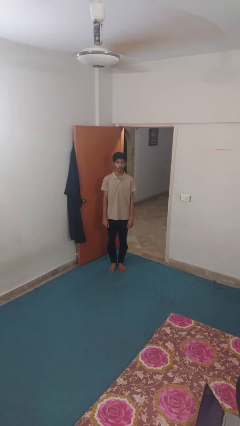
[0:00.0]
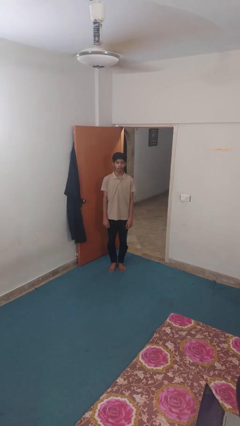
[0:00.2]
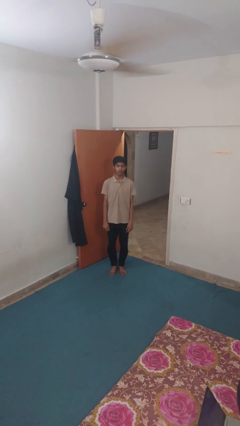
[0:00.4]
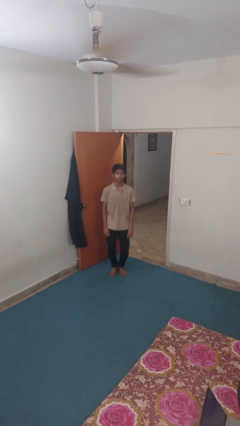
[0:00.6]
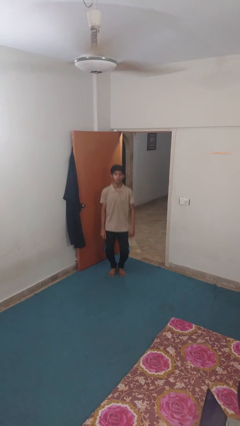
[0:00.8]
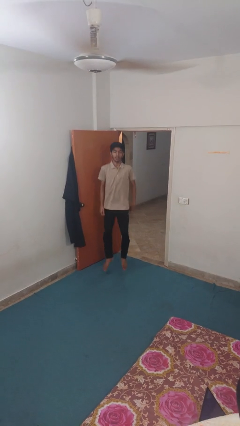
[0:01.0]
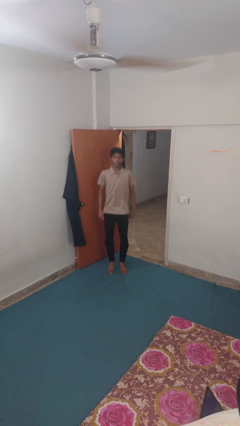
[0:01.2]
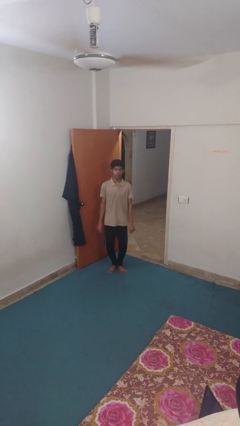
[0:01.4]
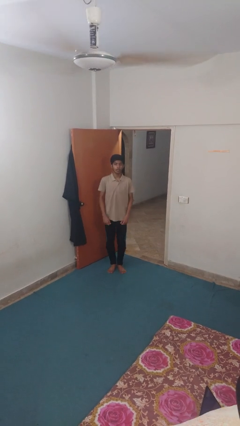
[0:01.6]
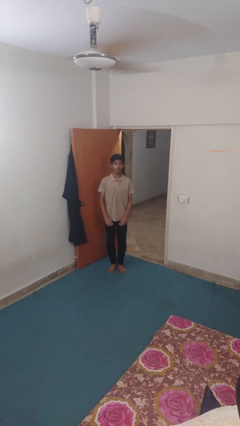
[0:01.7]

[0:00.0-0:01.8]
person jumps

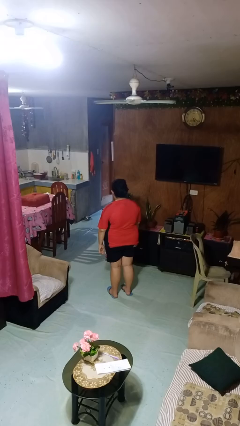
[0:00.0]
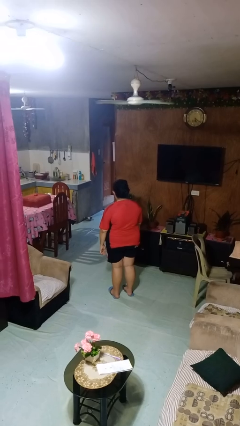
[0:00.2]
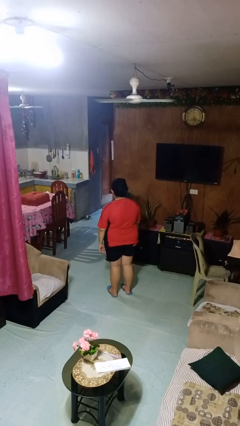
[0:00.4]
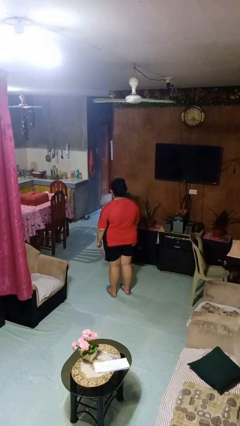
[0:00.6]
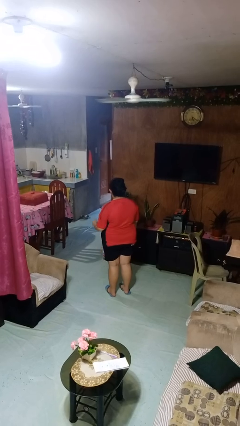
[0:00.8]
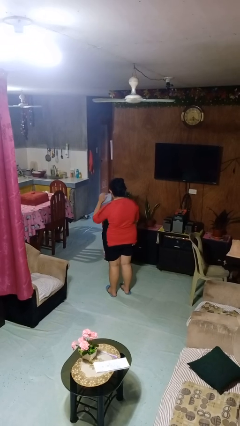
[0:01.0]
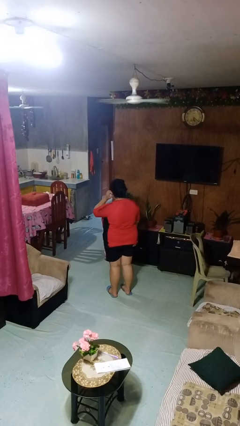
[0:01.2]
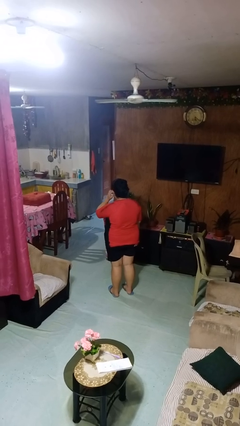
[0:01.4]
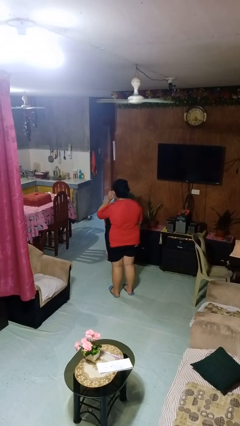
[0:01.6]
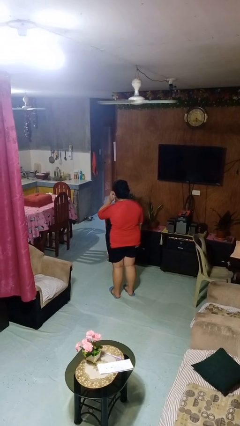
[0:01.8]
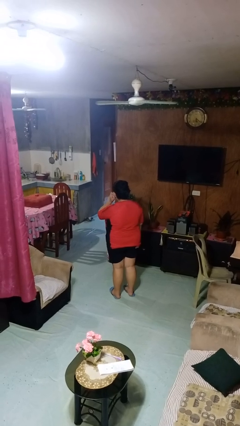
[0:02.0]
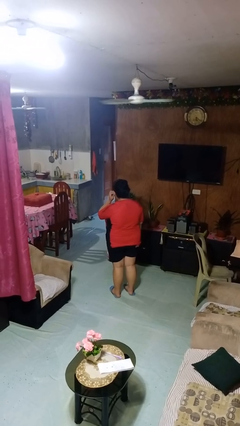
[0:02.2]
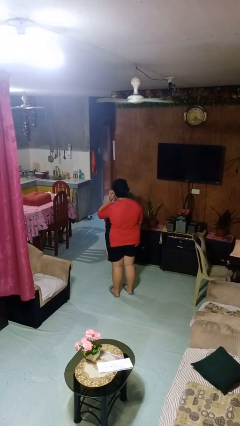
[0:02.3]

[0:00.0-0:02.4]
person touches earlobe

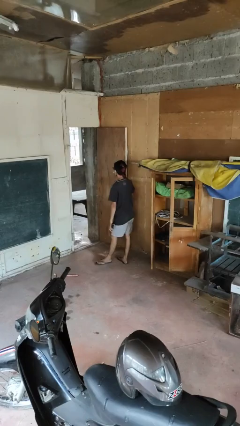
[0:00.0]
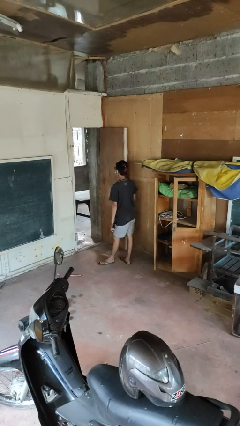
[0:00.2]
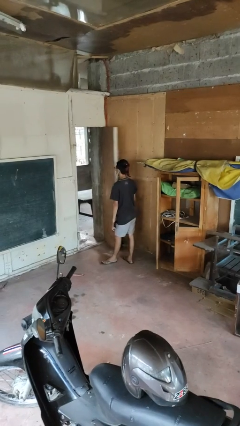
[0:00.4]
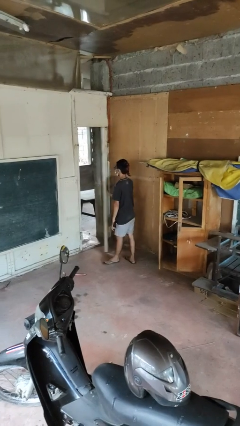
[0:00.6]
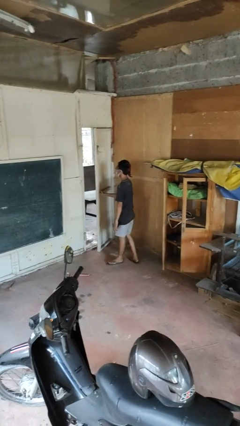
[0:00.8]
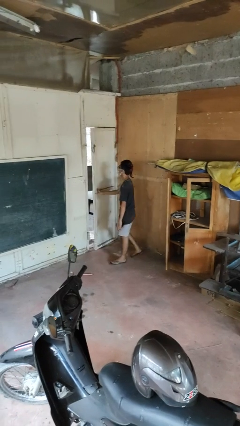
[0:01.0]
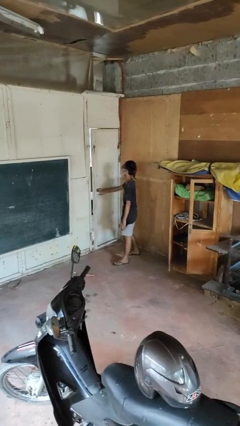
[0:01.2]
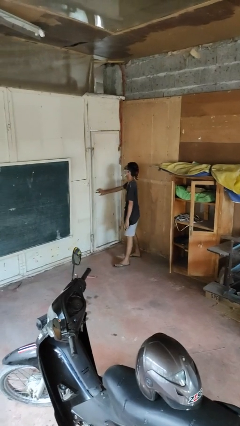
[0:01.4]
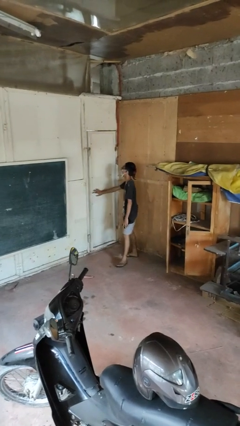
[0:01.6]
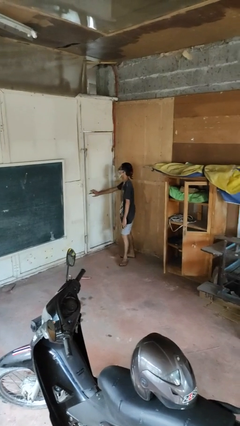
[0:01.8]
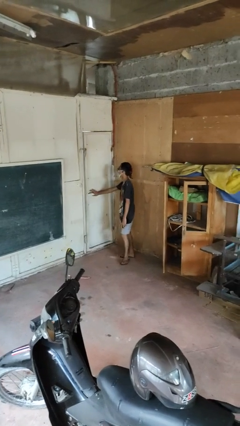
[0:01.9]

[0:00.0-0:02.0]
person closes facility door

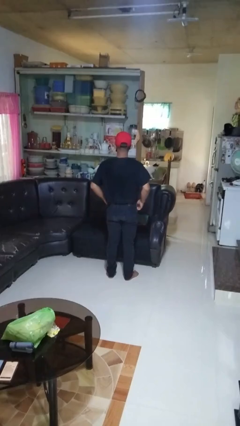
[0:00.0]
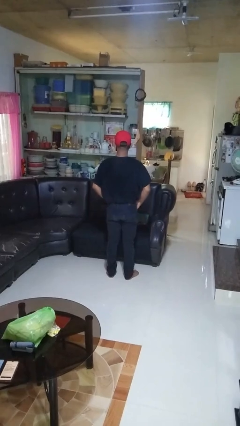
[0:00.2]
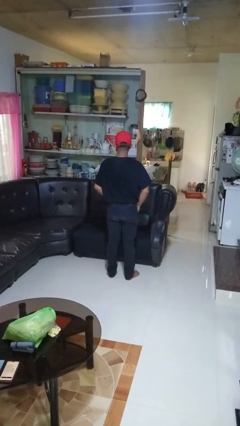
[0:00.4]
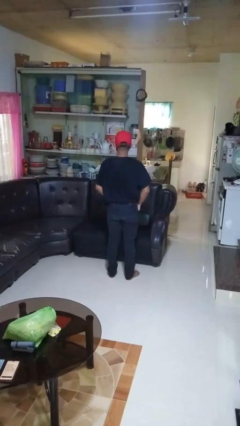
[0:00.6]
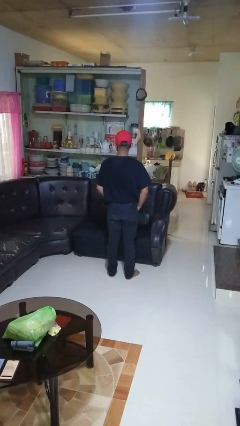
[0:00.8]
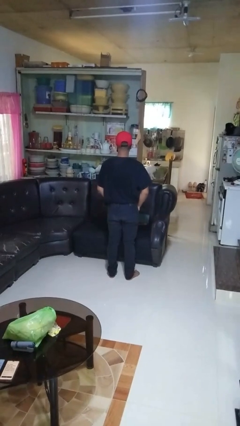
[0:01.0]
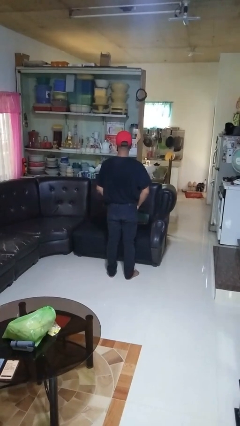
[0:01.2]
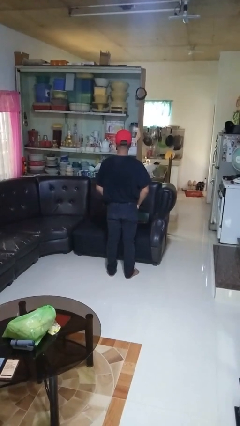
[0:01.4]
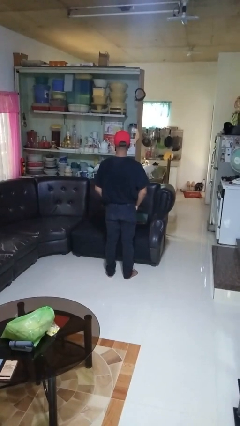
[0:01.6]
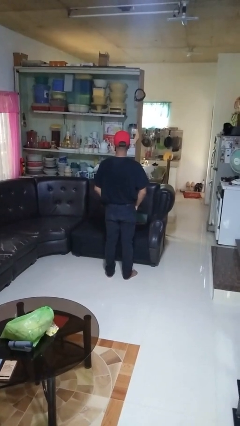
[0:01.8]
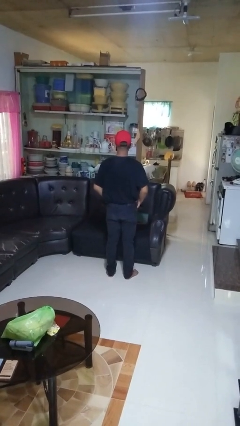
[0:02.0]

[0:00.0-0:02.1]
person puts hands in back pockets

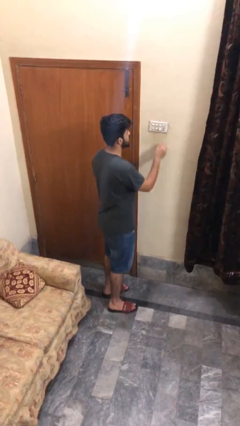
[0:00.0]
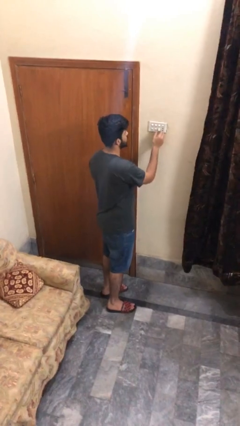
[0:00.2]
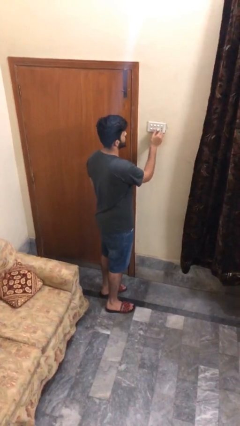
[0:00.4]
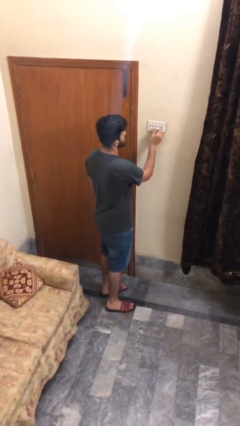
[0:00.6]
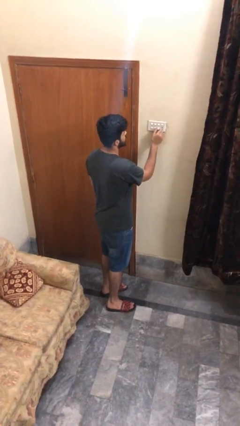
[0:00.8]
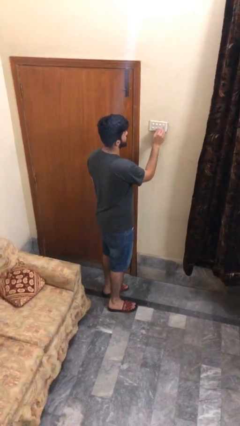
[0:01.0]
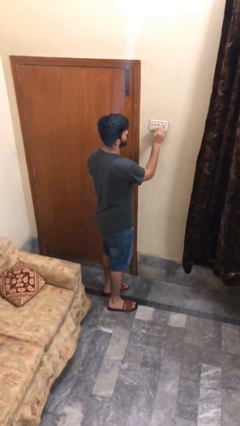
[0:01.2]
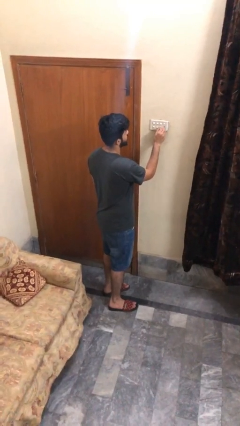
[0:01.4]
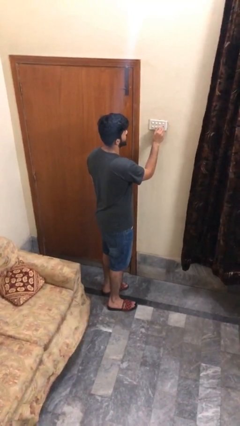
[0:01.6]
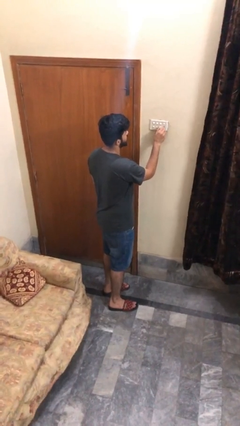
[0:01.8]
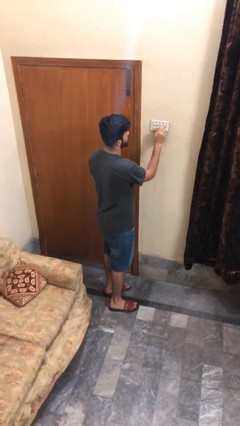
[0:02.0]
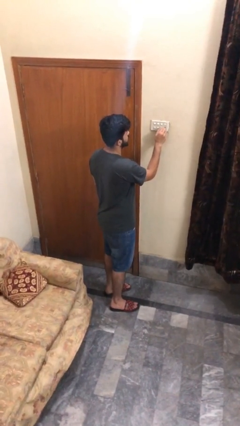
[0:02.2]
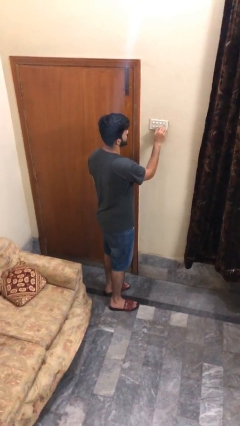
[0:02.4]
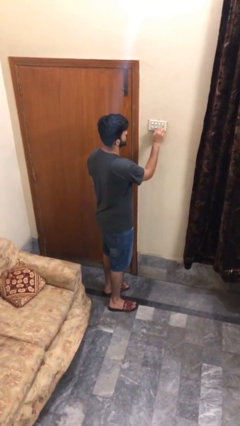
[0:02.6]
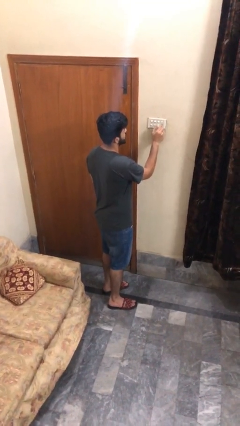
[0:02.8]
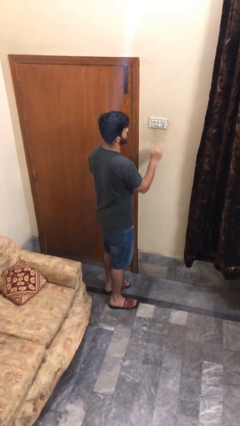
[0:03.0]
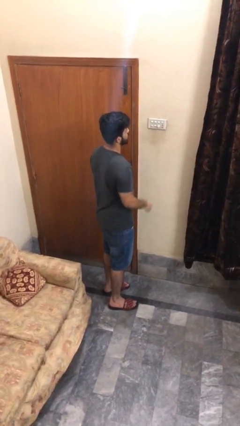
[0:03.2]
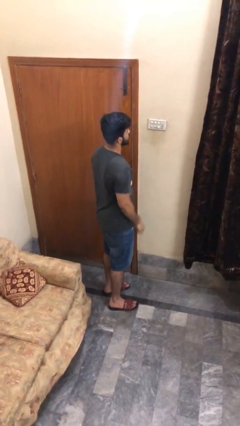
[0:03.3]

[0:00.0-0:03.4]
person adjusts thermostat

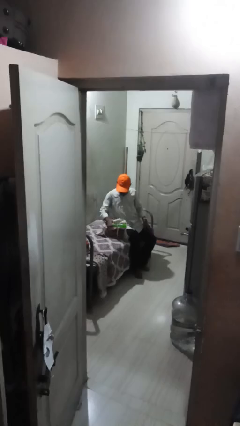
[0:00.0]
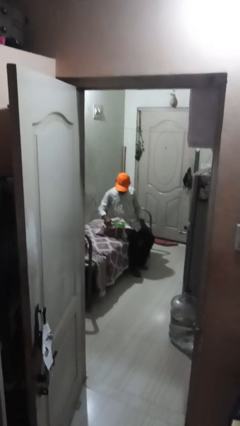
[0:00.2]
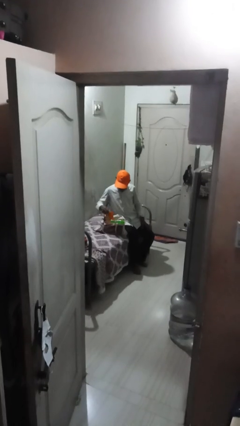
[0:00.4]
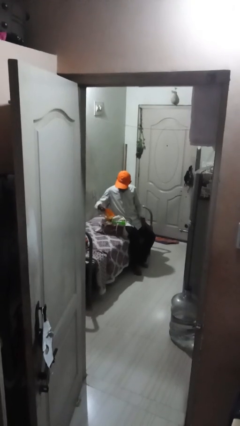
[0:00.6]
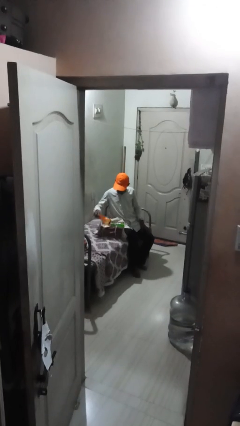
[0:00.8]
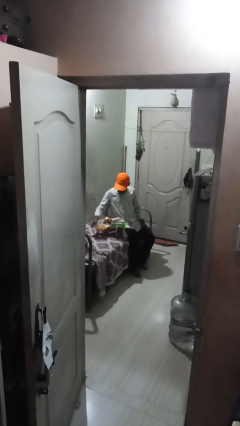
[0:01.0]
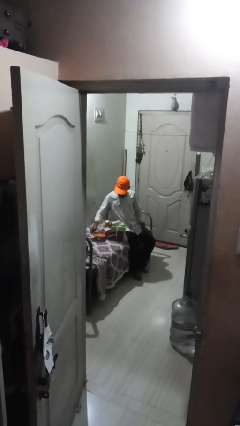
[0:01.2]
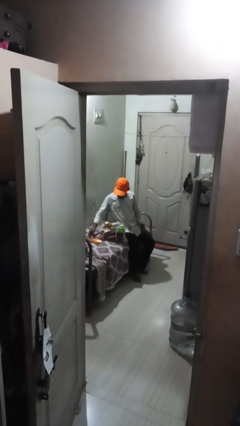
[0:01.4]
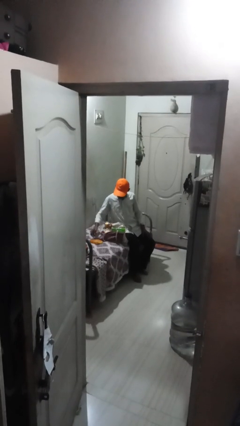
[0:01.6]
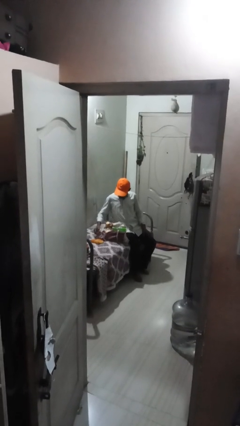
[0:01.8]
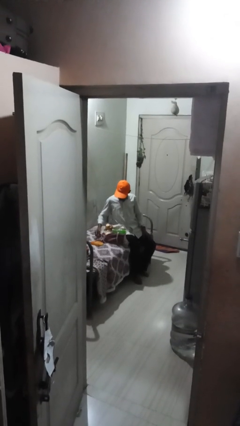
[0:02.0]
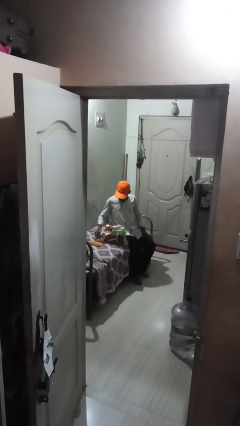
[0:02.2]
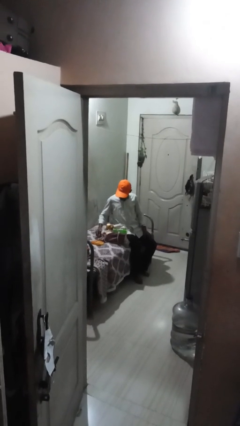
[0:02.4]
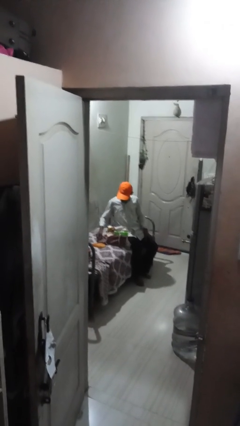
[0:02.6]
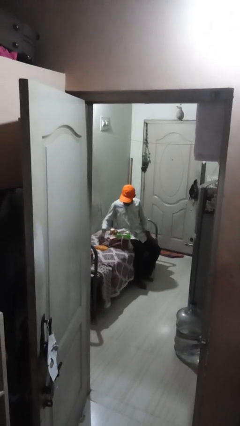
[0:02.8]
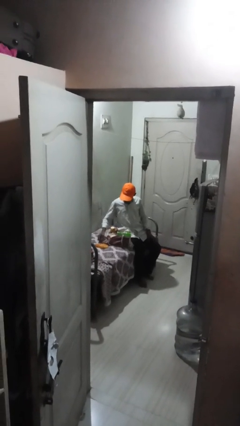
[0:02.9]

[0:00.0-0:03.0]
person takes object from bag

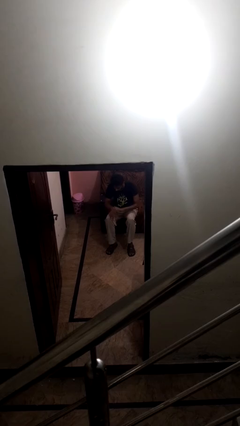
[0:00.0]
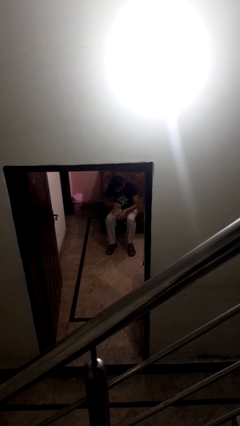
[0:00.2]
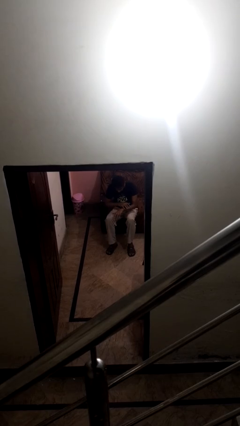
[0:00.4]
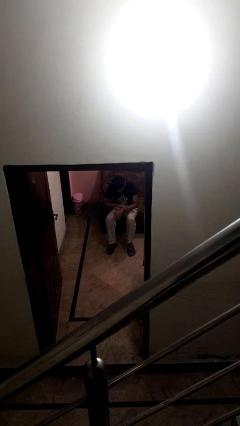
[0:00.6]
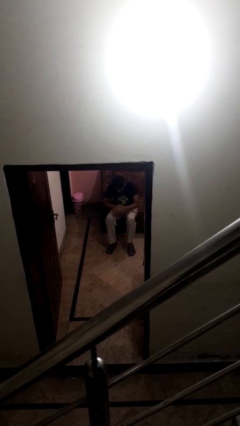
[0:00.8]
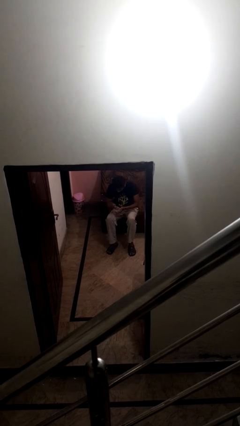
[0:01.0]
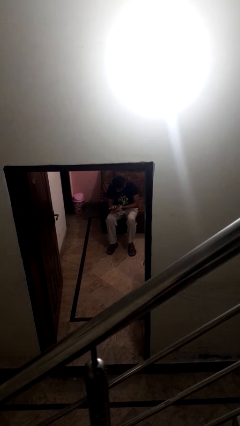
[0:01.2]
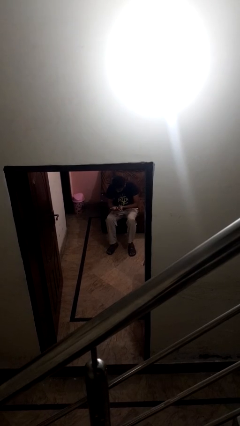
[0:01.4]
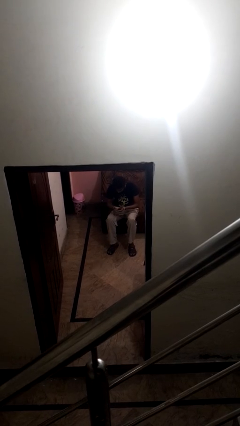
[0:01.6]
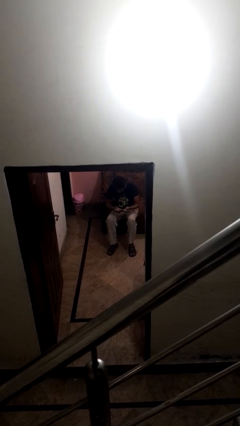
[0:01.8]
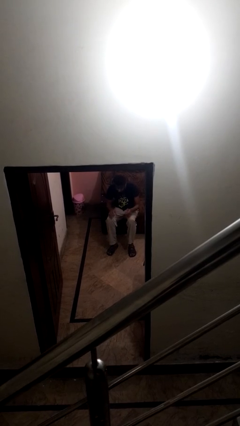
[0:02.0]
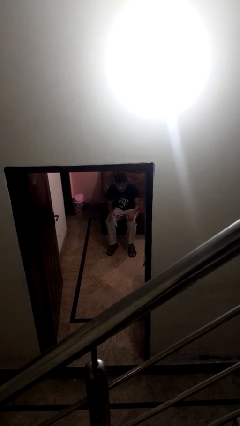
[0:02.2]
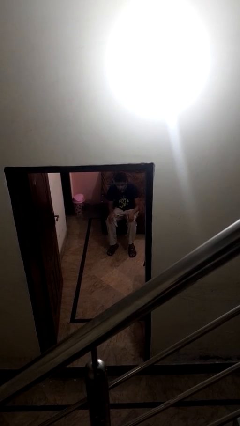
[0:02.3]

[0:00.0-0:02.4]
person looks at hands in lap
